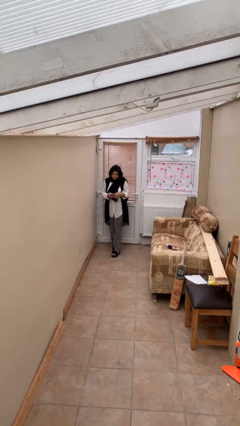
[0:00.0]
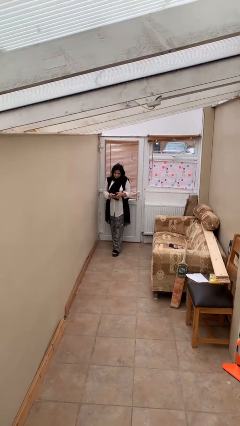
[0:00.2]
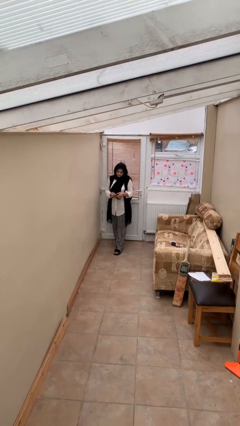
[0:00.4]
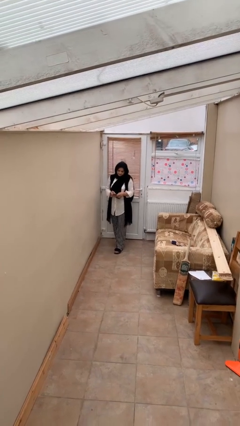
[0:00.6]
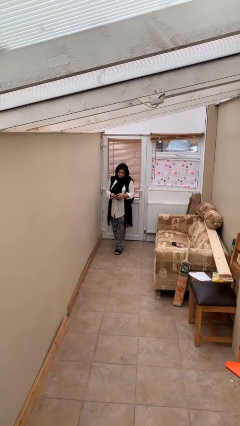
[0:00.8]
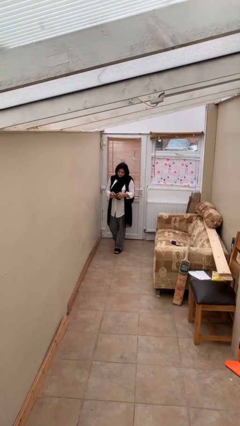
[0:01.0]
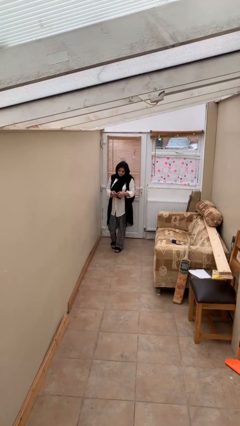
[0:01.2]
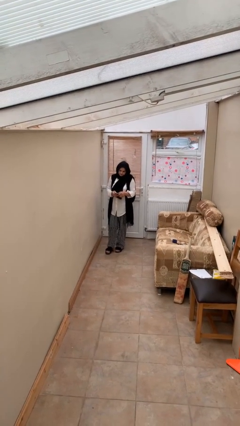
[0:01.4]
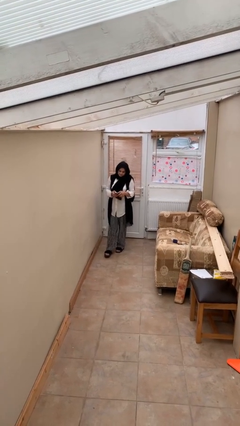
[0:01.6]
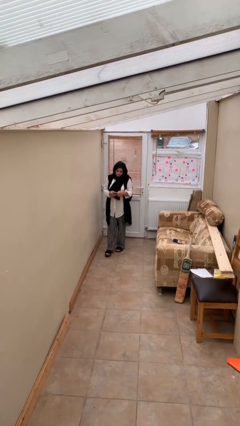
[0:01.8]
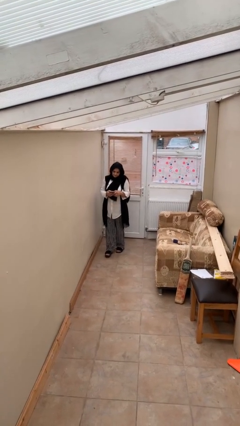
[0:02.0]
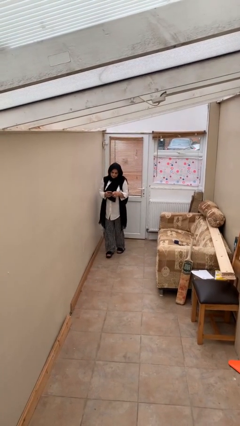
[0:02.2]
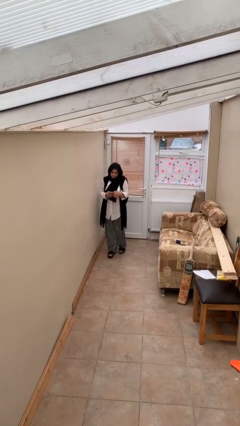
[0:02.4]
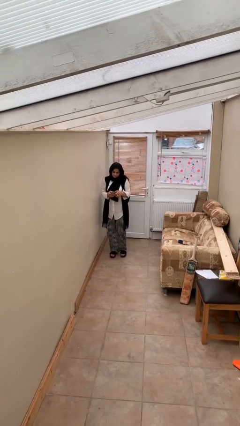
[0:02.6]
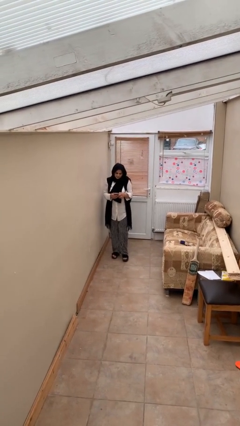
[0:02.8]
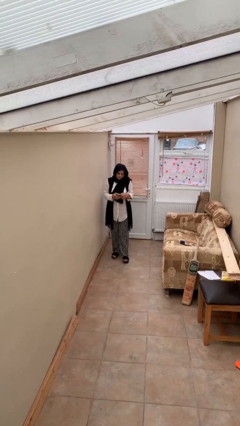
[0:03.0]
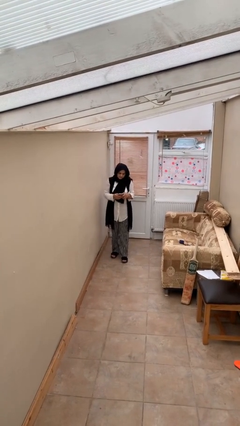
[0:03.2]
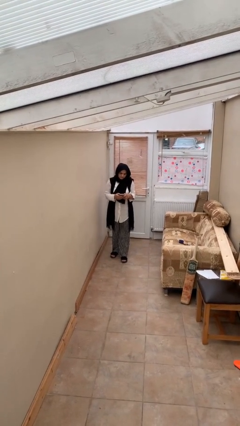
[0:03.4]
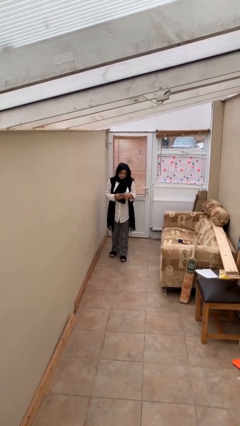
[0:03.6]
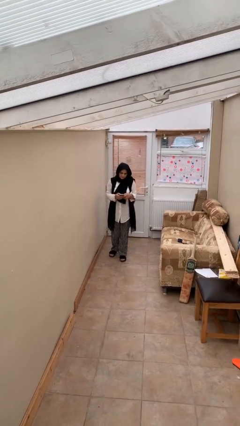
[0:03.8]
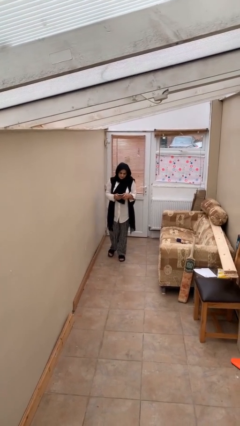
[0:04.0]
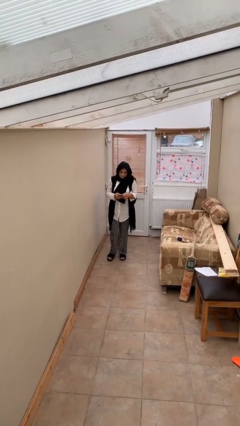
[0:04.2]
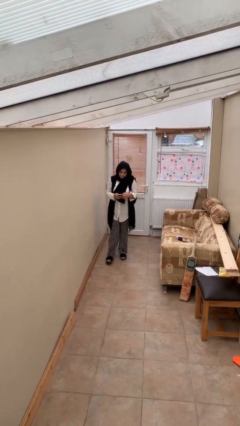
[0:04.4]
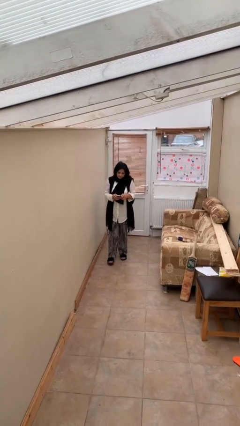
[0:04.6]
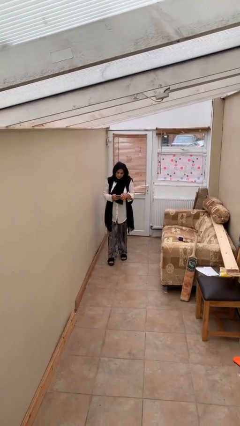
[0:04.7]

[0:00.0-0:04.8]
person texts on phone

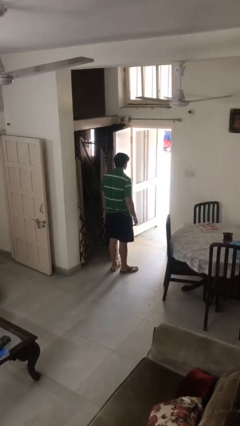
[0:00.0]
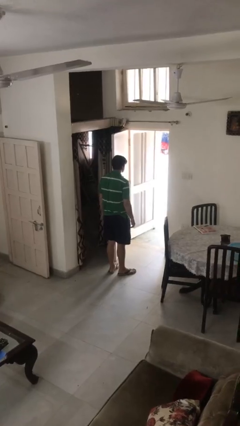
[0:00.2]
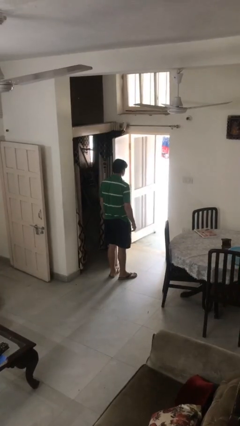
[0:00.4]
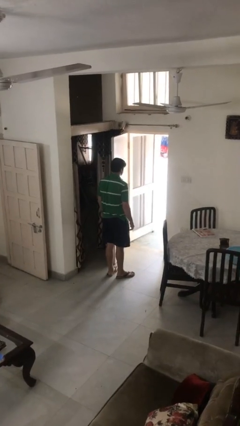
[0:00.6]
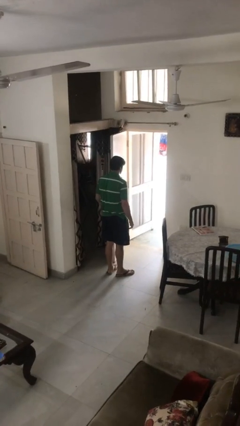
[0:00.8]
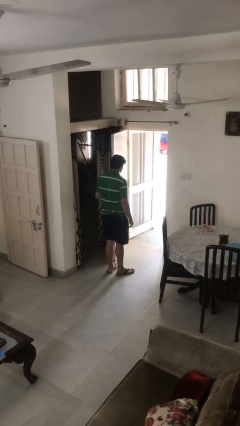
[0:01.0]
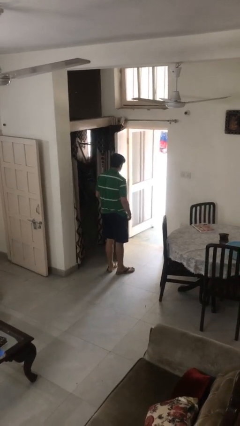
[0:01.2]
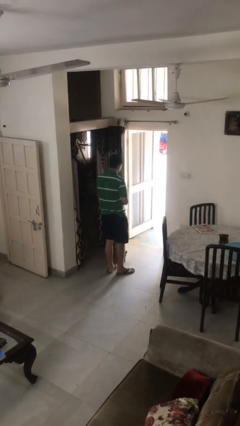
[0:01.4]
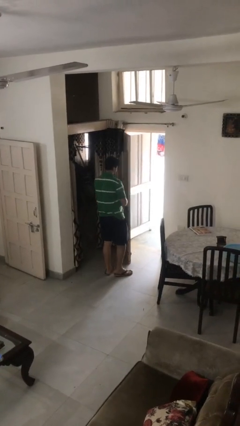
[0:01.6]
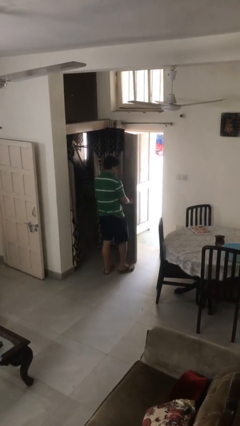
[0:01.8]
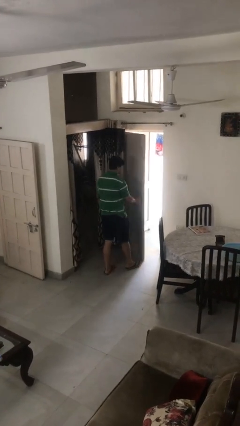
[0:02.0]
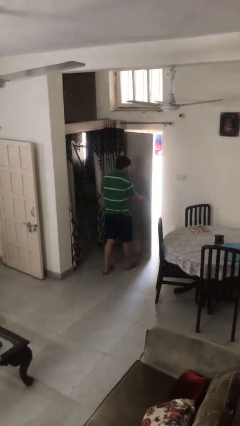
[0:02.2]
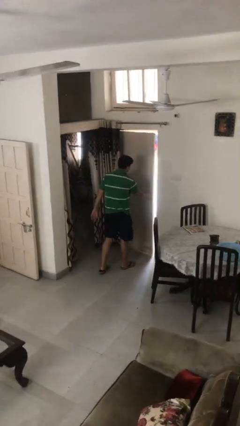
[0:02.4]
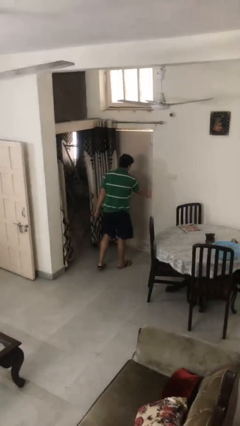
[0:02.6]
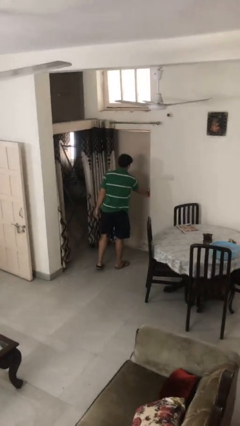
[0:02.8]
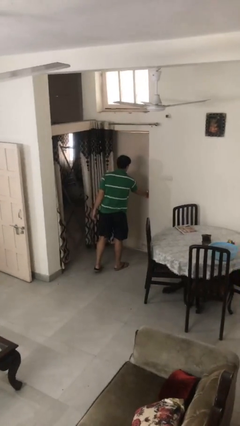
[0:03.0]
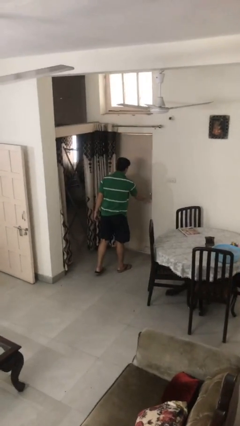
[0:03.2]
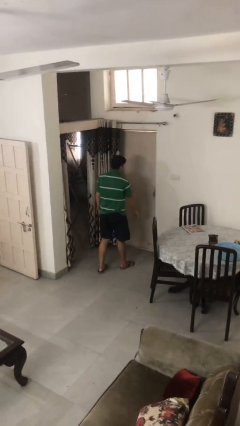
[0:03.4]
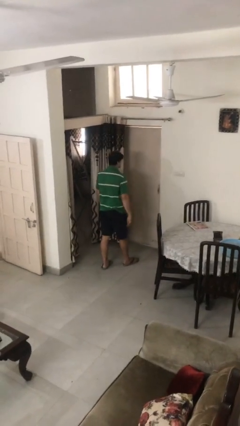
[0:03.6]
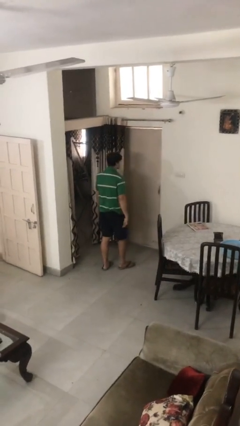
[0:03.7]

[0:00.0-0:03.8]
person closes facility door

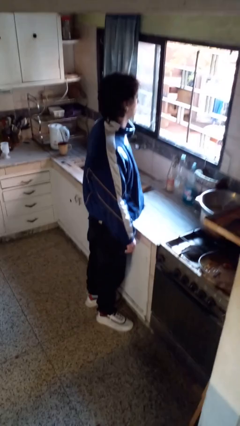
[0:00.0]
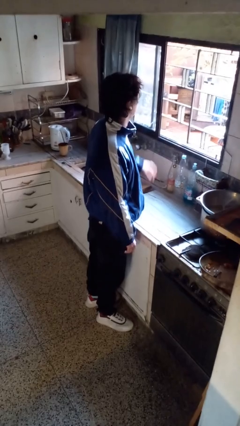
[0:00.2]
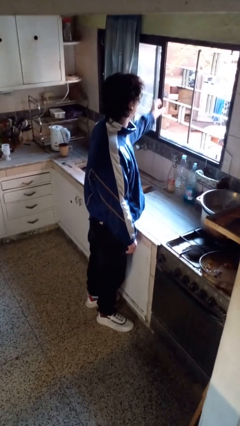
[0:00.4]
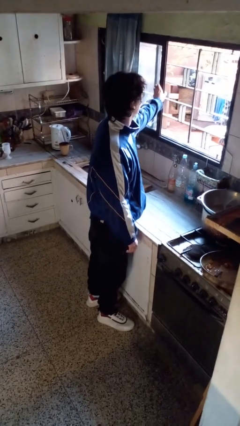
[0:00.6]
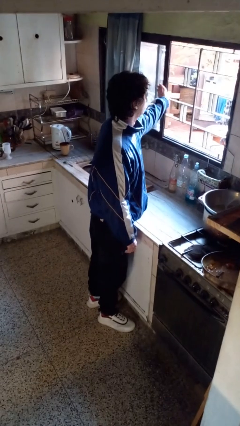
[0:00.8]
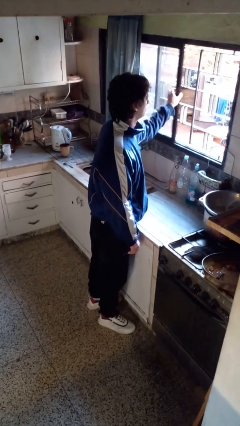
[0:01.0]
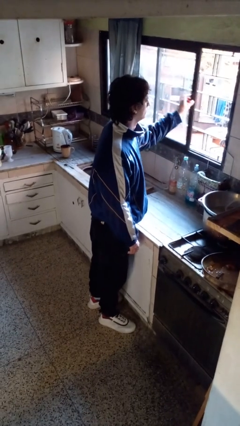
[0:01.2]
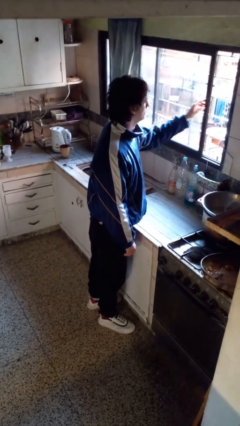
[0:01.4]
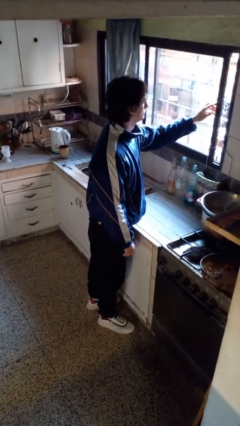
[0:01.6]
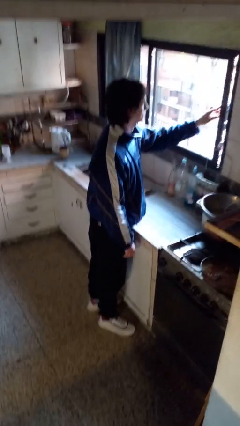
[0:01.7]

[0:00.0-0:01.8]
person closes home window

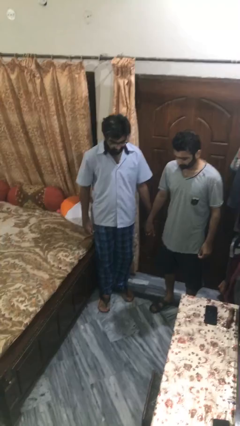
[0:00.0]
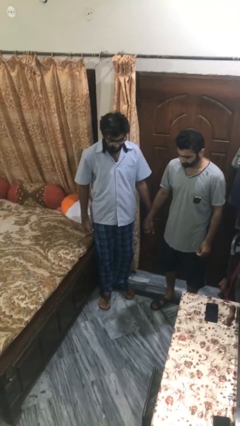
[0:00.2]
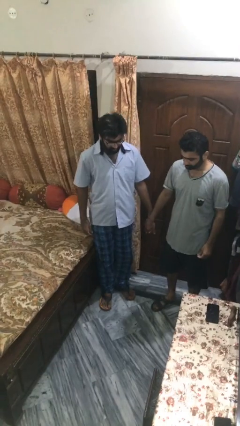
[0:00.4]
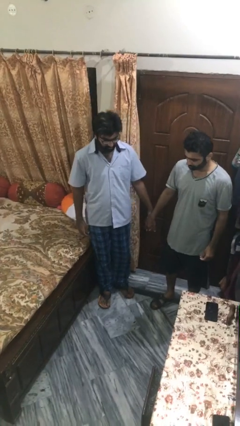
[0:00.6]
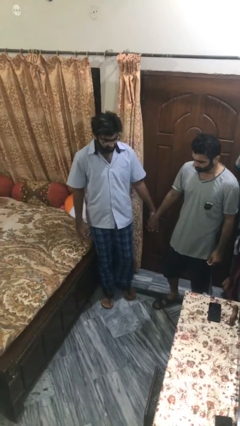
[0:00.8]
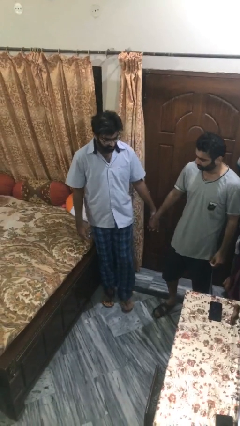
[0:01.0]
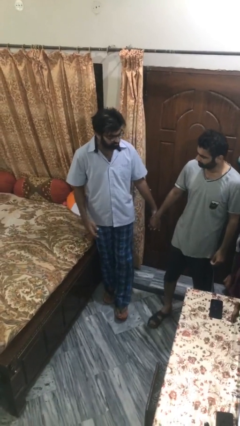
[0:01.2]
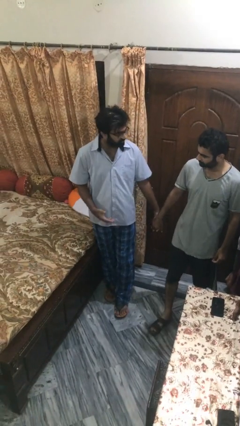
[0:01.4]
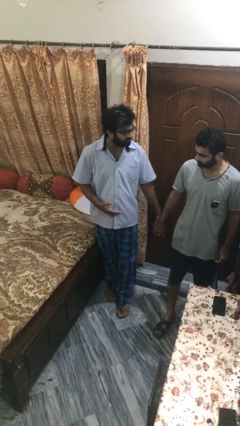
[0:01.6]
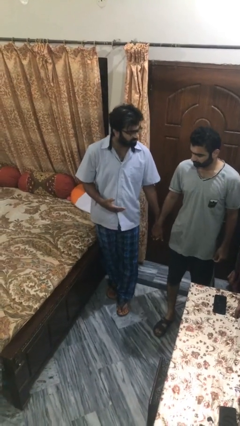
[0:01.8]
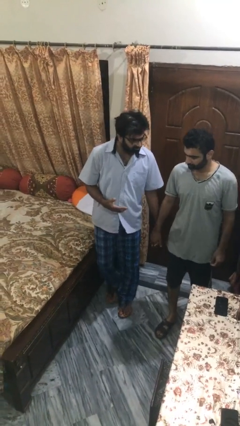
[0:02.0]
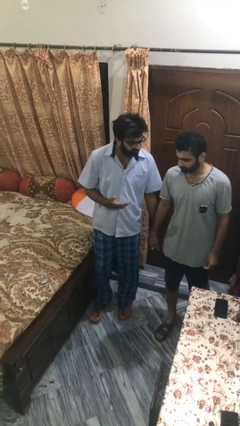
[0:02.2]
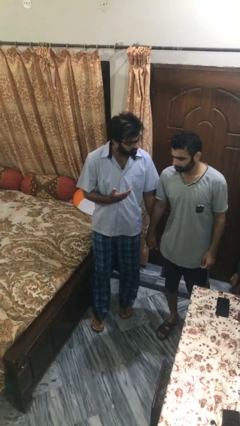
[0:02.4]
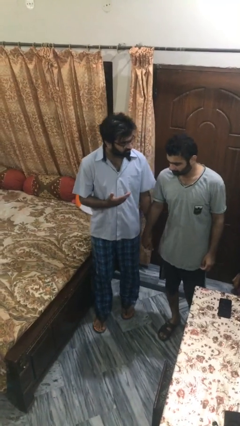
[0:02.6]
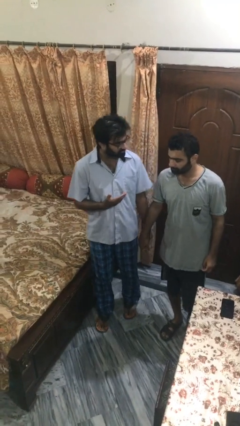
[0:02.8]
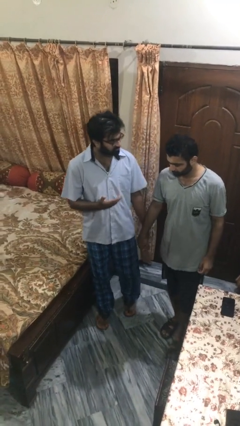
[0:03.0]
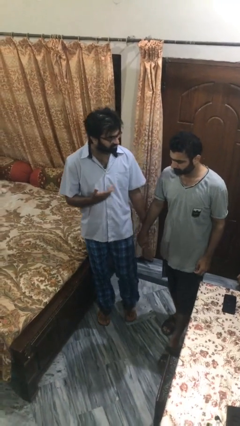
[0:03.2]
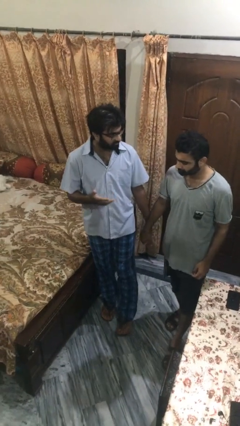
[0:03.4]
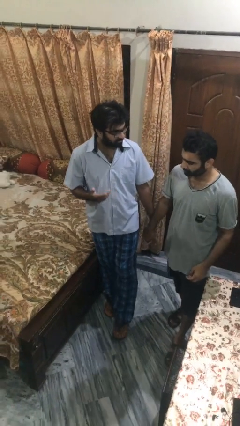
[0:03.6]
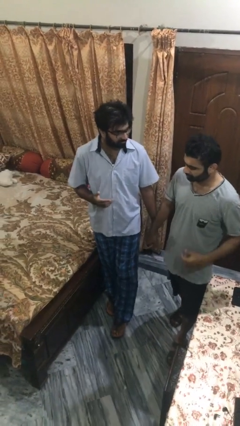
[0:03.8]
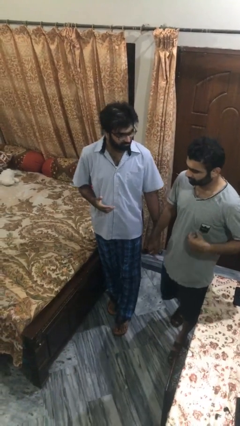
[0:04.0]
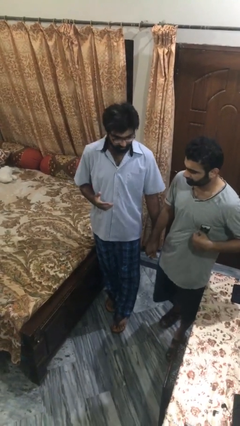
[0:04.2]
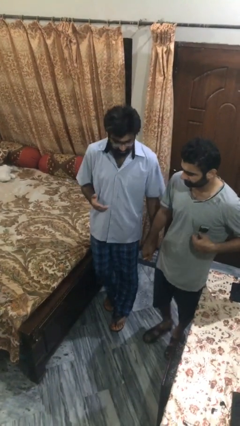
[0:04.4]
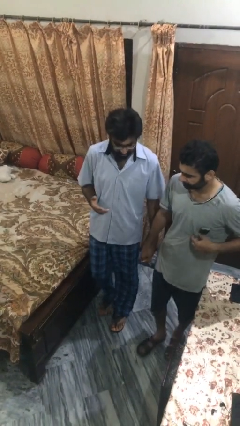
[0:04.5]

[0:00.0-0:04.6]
person holds hand

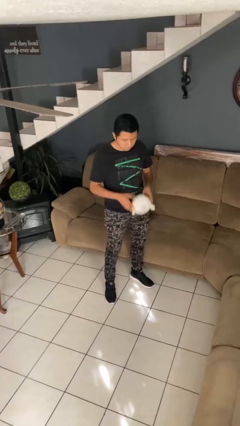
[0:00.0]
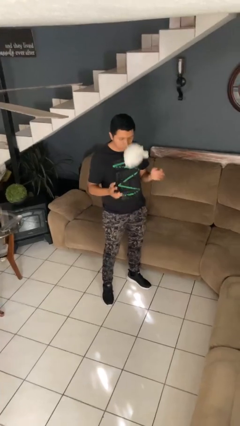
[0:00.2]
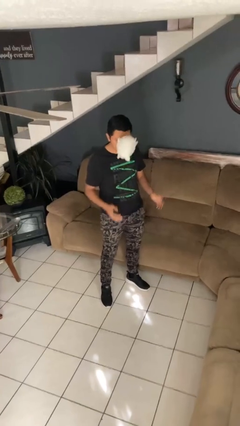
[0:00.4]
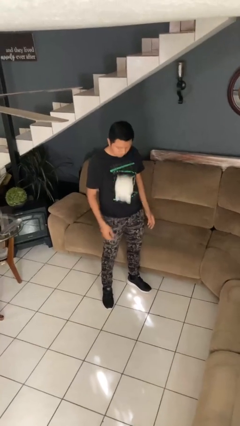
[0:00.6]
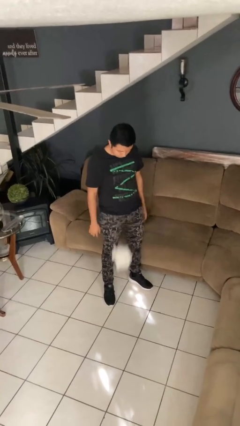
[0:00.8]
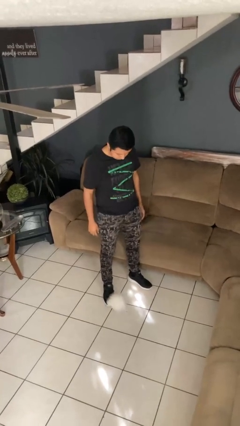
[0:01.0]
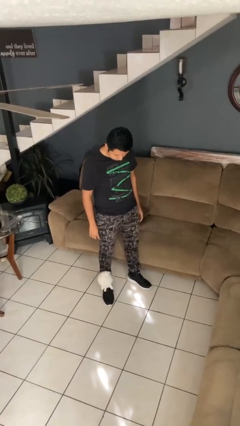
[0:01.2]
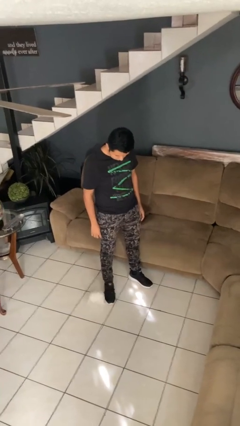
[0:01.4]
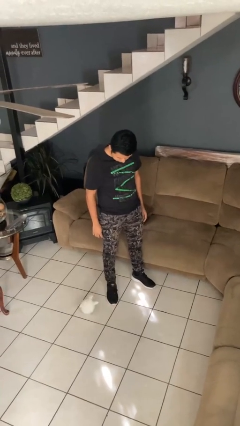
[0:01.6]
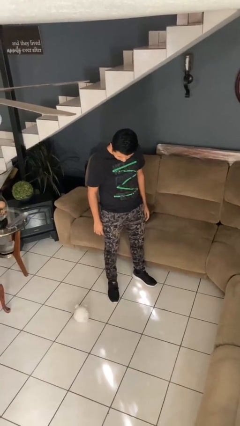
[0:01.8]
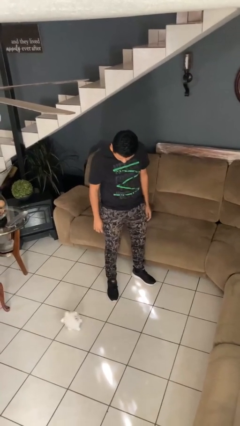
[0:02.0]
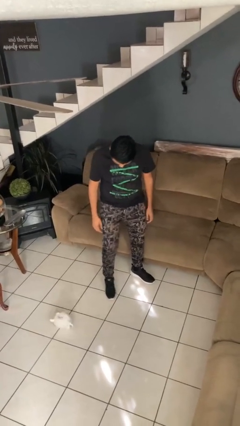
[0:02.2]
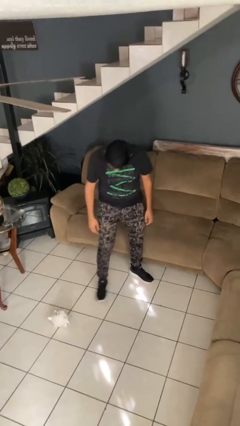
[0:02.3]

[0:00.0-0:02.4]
person throws object into air

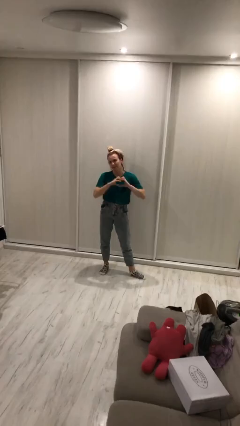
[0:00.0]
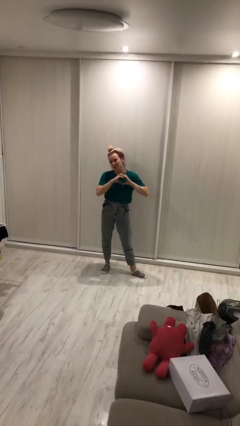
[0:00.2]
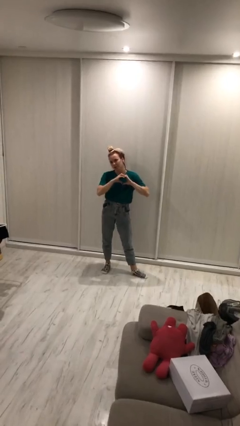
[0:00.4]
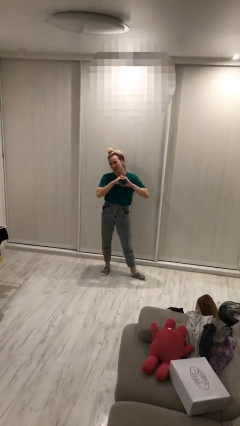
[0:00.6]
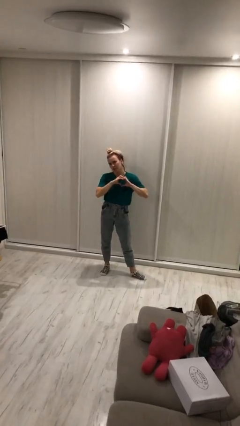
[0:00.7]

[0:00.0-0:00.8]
person gestures heart
